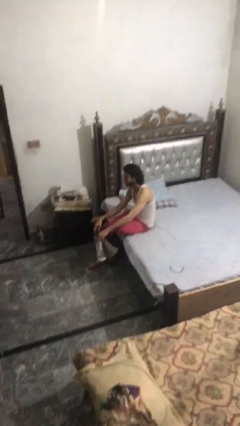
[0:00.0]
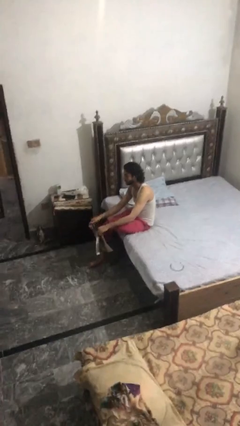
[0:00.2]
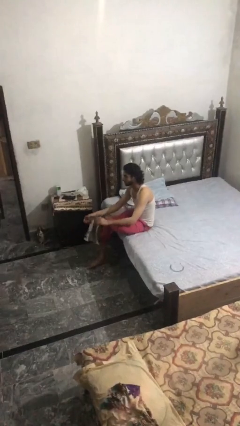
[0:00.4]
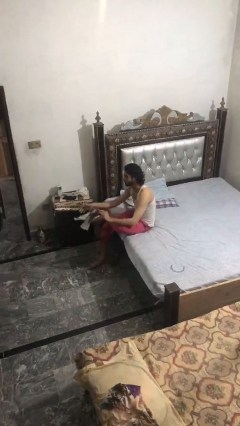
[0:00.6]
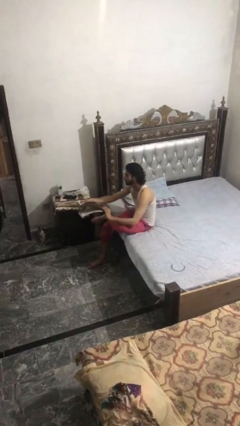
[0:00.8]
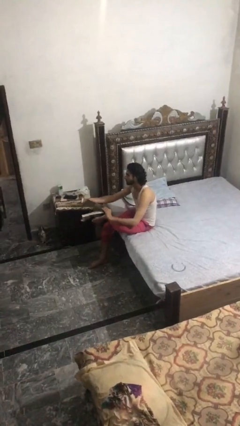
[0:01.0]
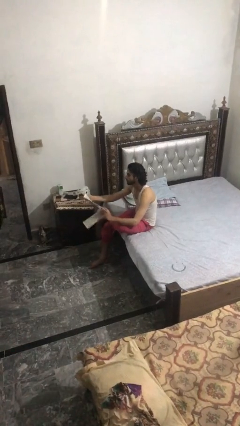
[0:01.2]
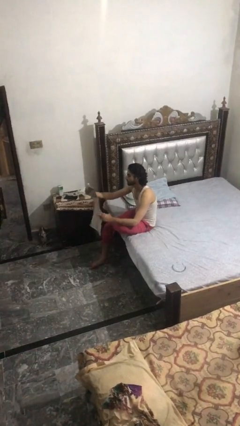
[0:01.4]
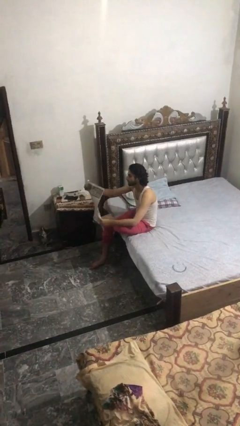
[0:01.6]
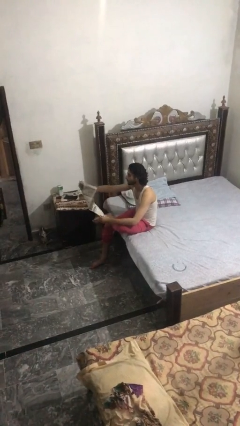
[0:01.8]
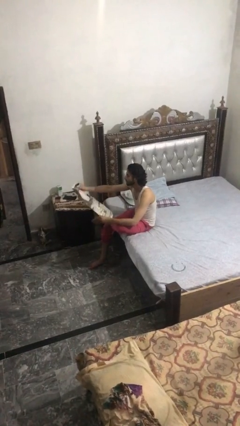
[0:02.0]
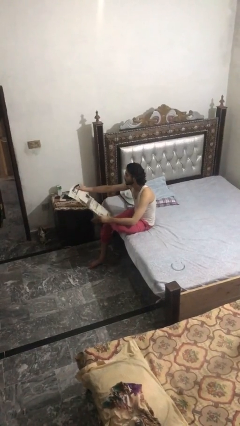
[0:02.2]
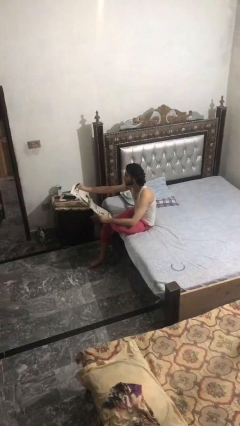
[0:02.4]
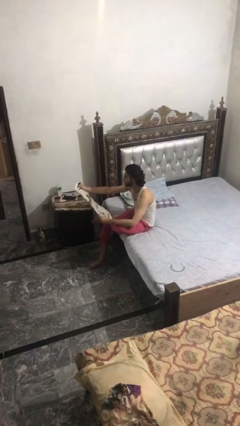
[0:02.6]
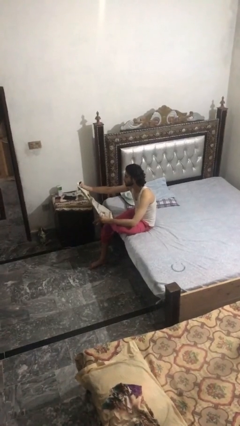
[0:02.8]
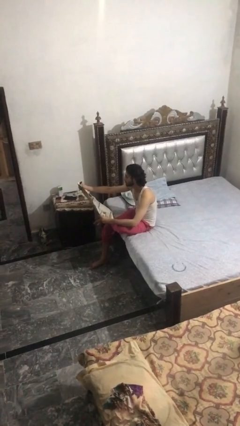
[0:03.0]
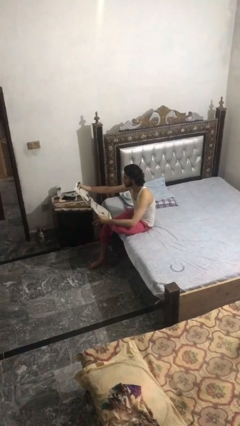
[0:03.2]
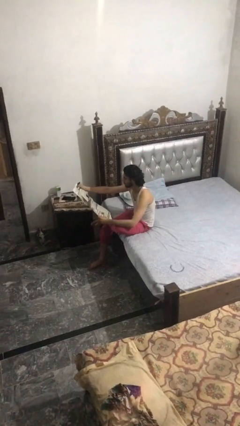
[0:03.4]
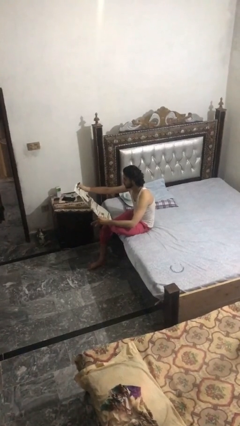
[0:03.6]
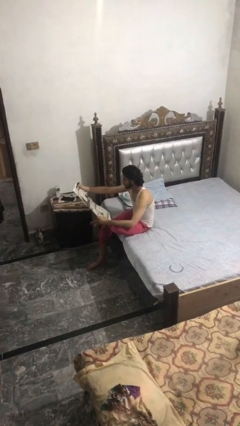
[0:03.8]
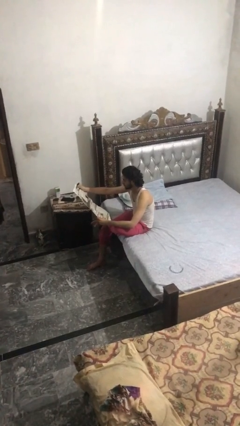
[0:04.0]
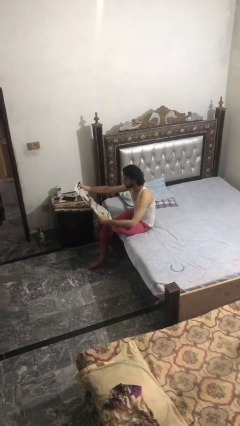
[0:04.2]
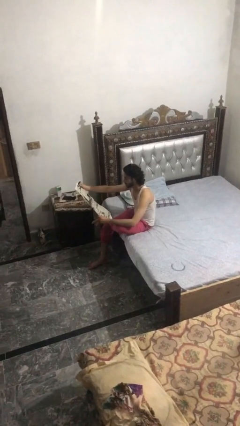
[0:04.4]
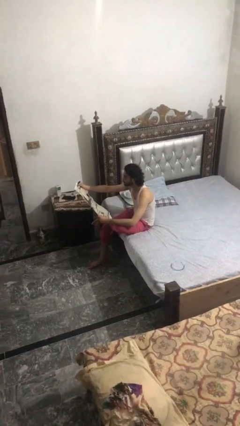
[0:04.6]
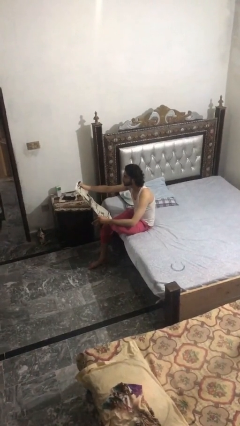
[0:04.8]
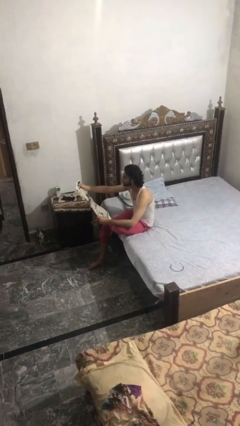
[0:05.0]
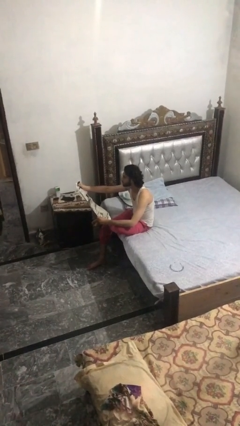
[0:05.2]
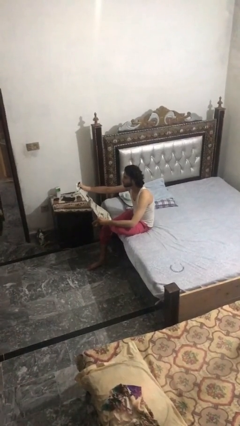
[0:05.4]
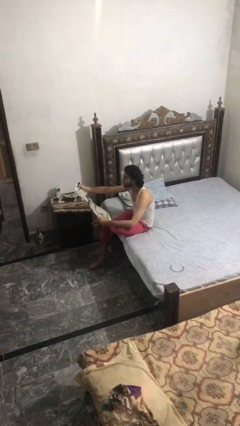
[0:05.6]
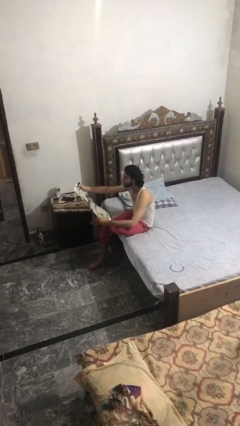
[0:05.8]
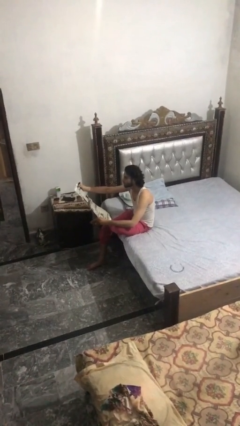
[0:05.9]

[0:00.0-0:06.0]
person reads newspaper

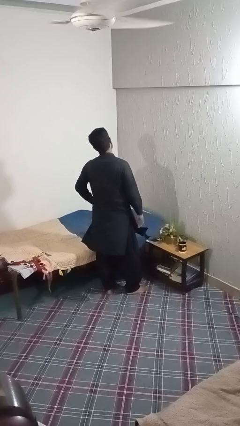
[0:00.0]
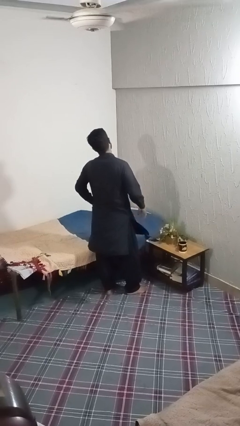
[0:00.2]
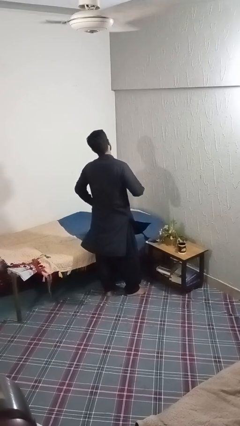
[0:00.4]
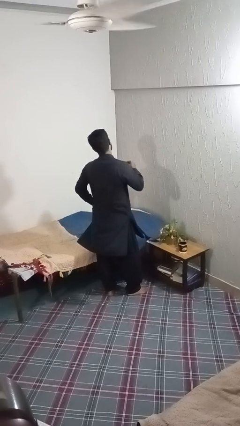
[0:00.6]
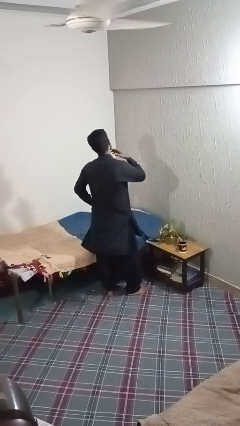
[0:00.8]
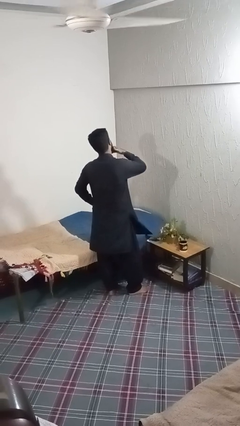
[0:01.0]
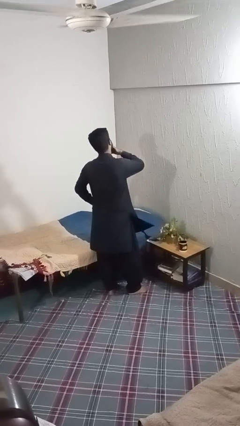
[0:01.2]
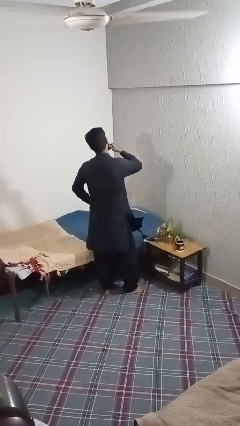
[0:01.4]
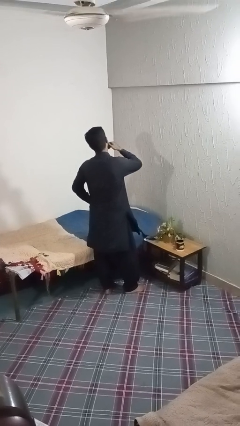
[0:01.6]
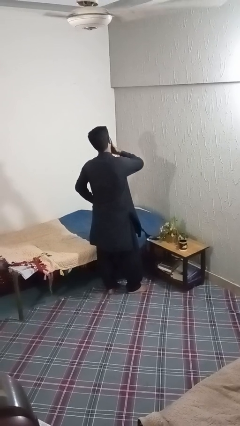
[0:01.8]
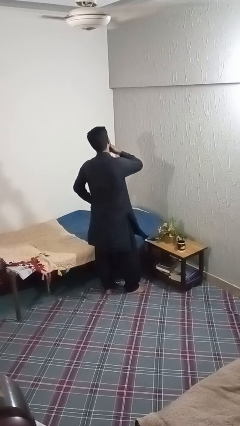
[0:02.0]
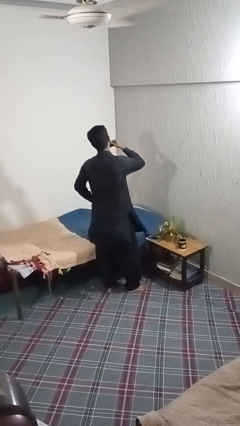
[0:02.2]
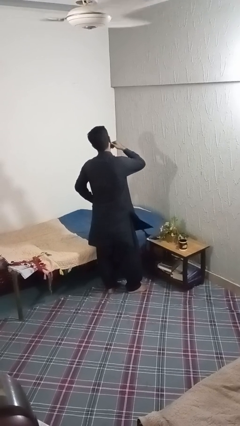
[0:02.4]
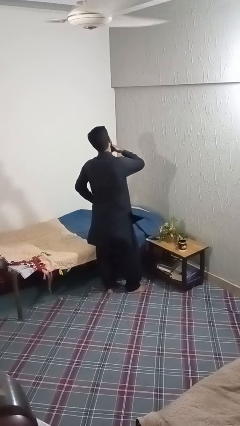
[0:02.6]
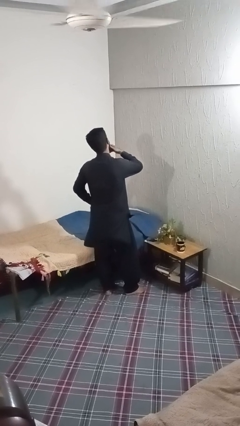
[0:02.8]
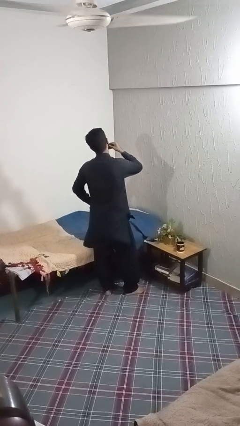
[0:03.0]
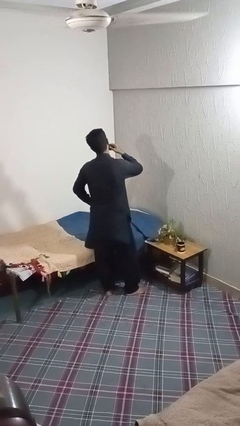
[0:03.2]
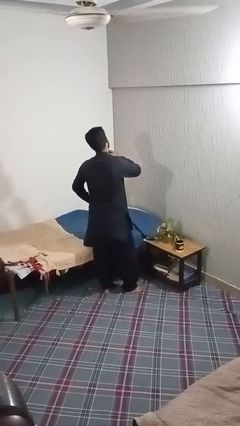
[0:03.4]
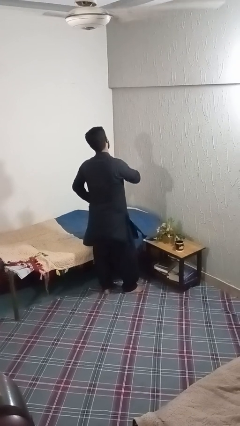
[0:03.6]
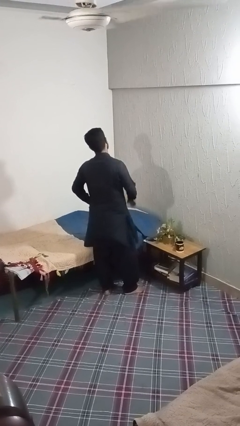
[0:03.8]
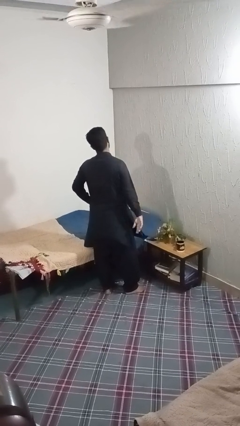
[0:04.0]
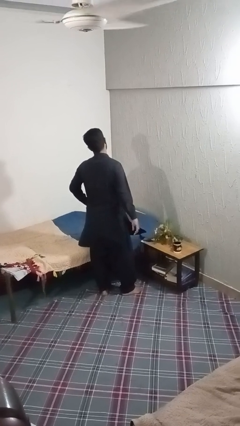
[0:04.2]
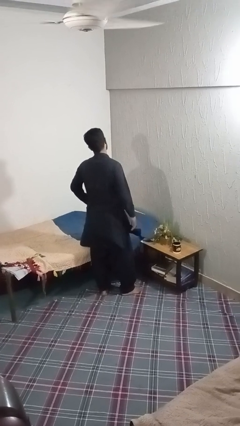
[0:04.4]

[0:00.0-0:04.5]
person strokes chin

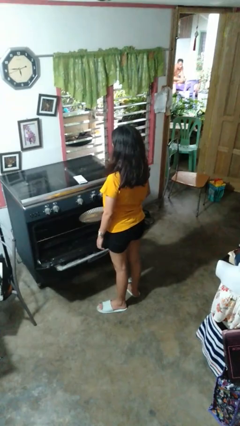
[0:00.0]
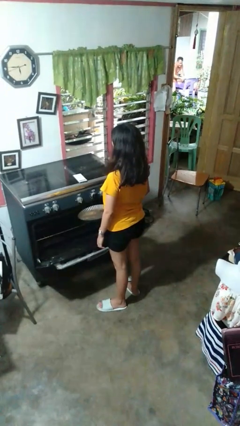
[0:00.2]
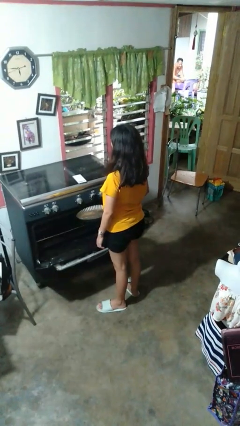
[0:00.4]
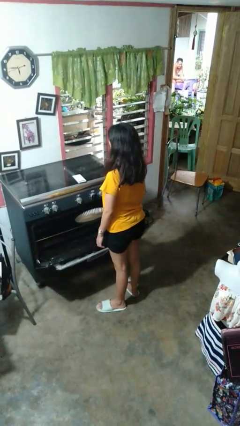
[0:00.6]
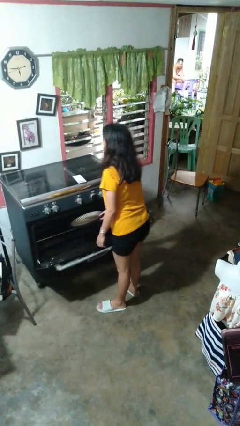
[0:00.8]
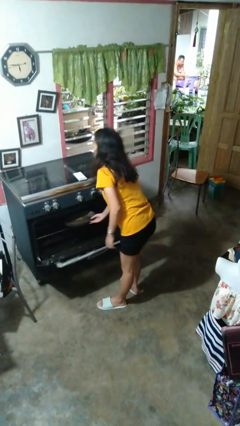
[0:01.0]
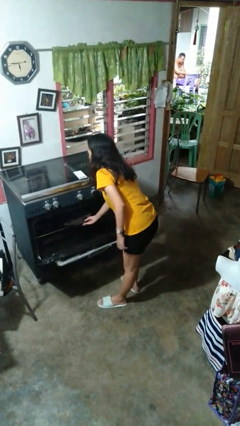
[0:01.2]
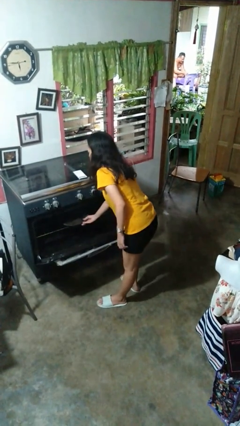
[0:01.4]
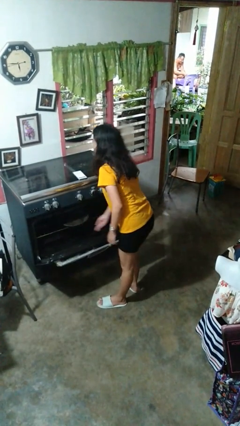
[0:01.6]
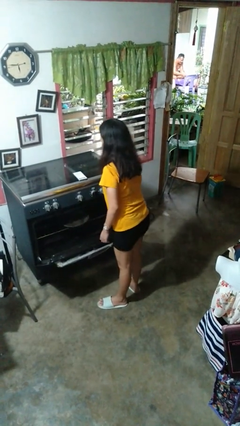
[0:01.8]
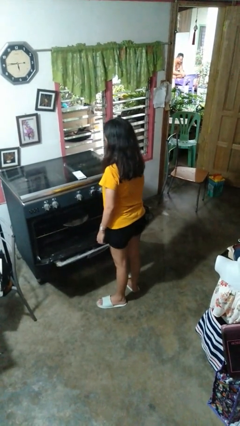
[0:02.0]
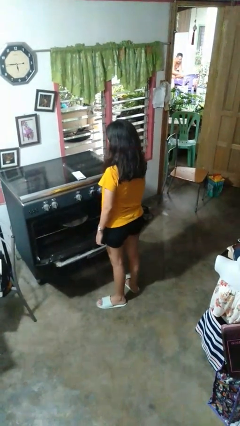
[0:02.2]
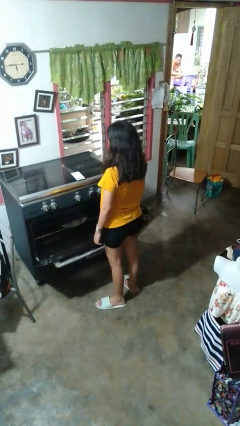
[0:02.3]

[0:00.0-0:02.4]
person puts object into oven

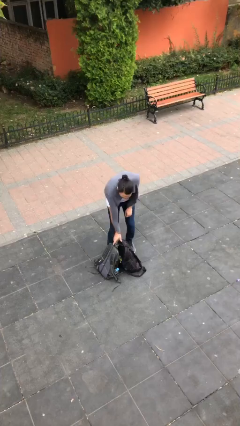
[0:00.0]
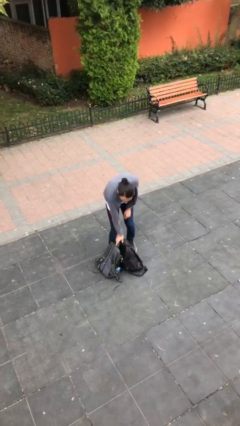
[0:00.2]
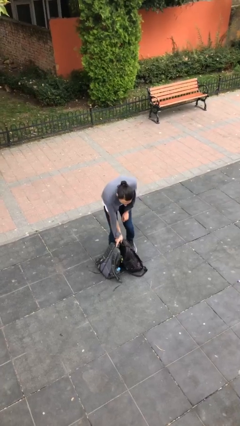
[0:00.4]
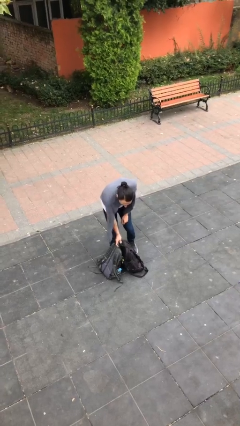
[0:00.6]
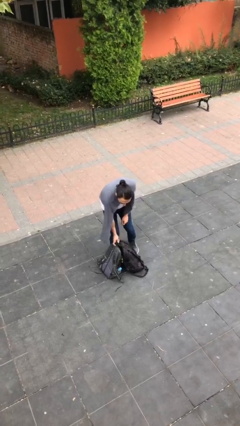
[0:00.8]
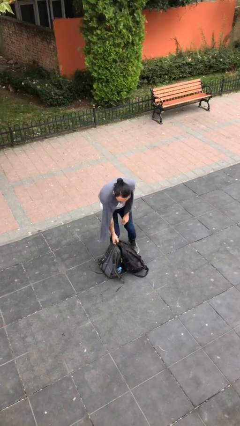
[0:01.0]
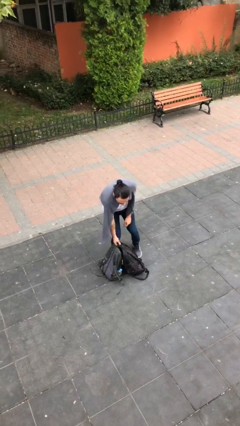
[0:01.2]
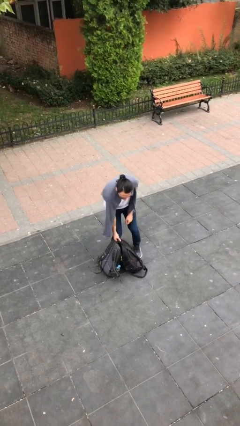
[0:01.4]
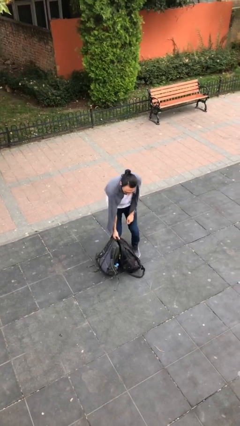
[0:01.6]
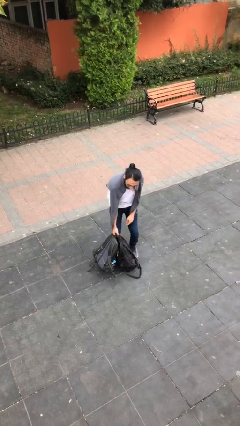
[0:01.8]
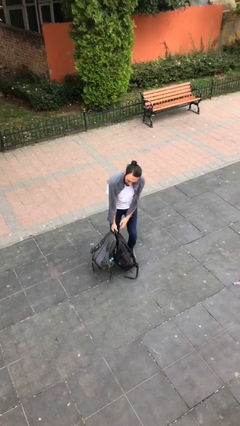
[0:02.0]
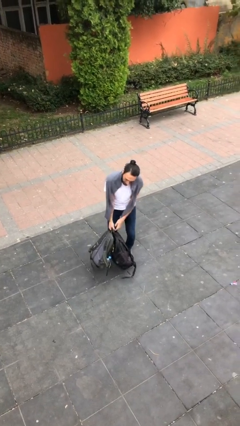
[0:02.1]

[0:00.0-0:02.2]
person picks up object from floor

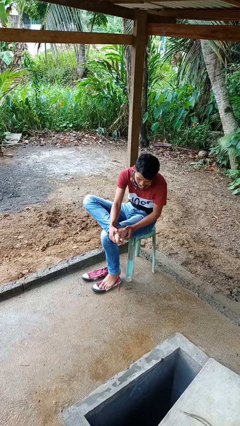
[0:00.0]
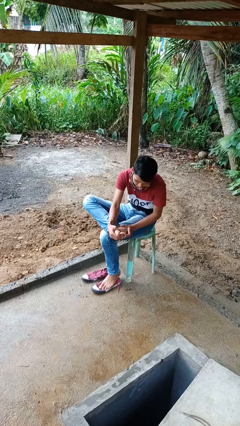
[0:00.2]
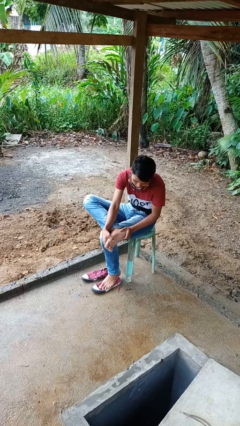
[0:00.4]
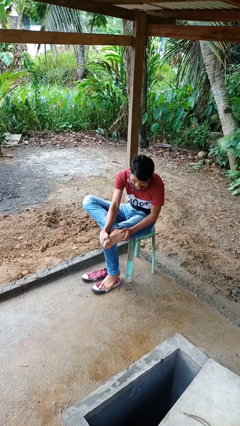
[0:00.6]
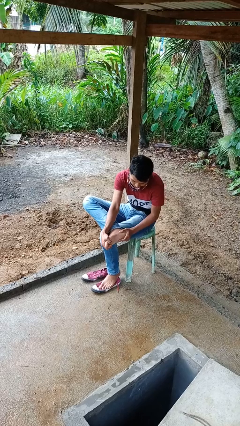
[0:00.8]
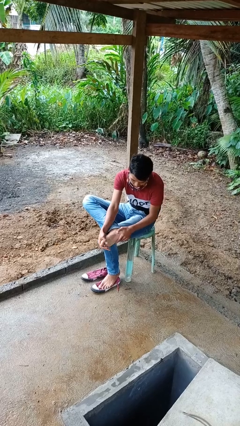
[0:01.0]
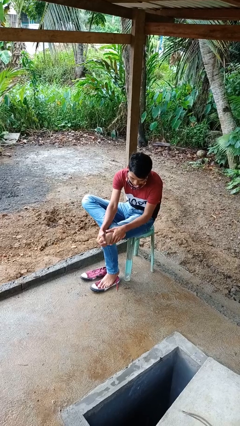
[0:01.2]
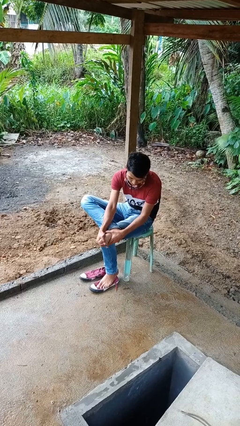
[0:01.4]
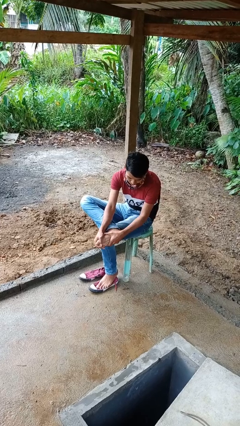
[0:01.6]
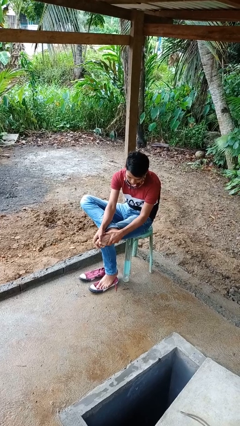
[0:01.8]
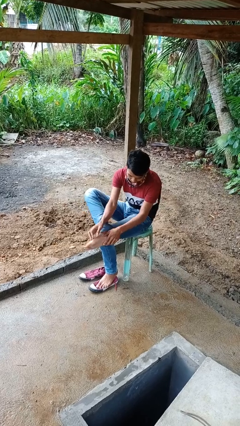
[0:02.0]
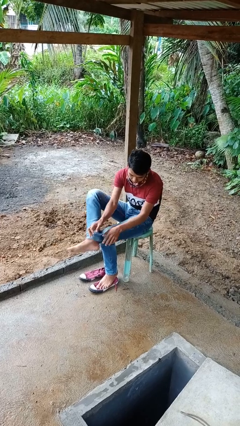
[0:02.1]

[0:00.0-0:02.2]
person rubs foot
